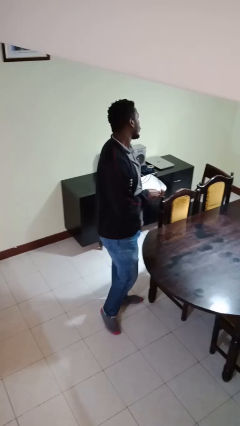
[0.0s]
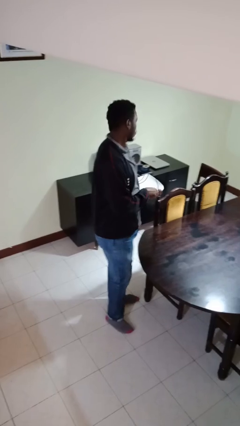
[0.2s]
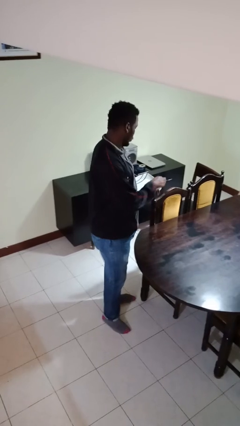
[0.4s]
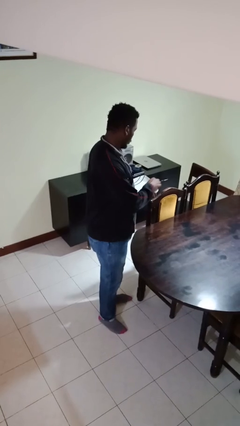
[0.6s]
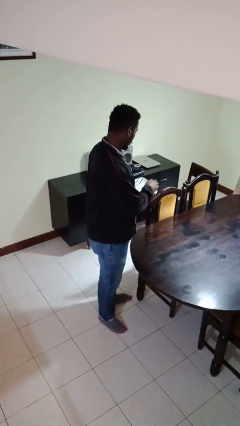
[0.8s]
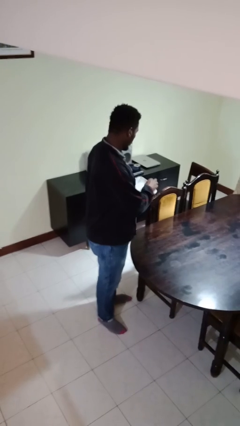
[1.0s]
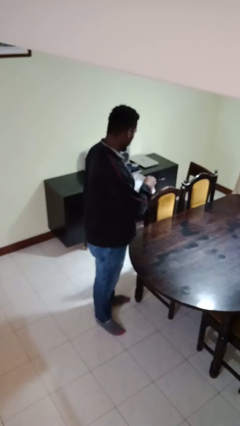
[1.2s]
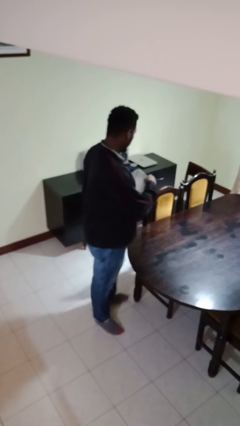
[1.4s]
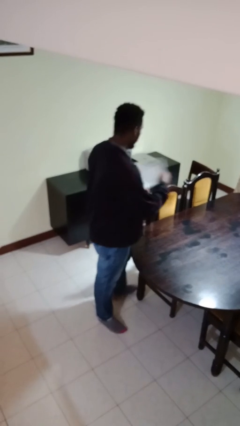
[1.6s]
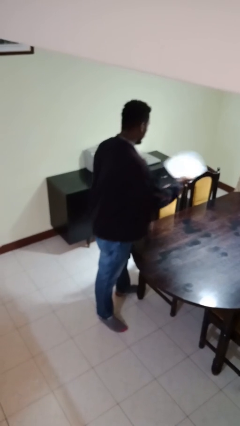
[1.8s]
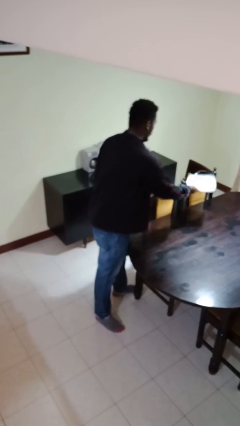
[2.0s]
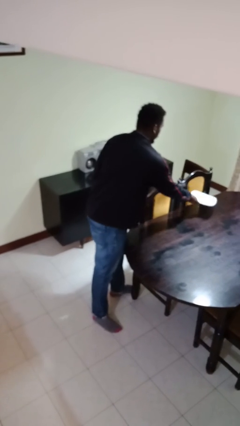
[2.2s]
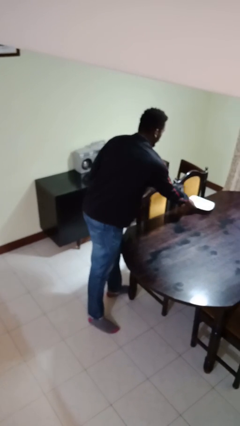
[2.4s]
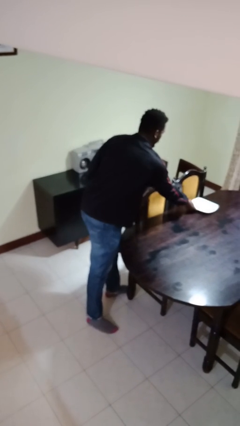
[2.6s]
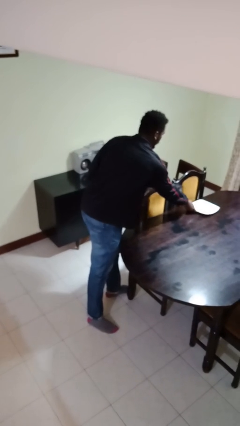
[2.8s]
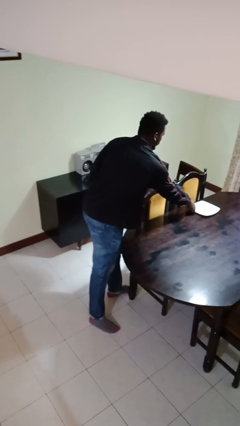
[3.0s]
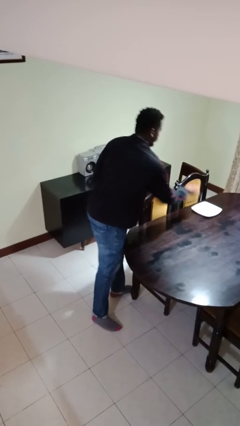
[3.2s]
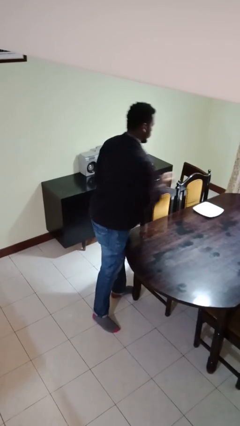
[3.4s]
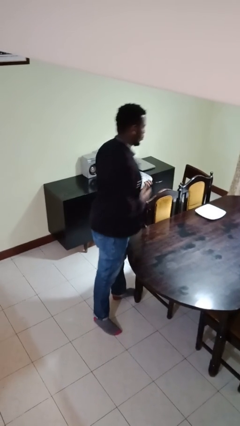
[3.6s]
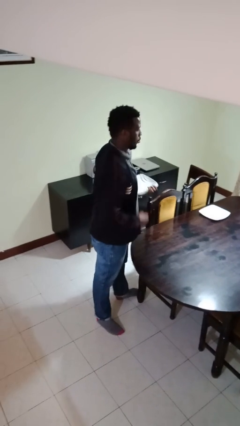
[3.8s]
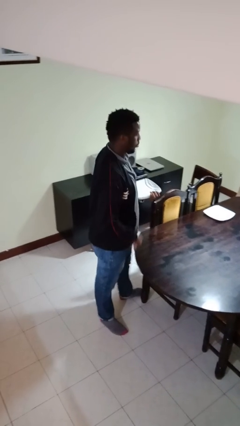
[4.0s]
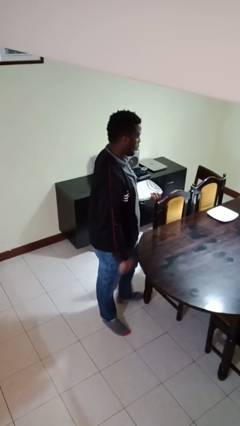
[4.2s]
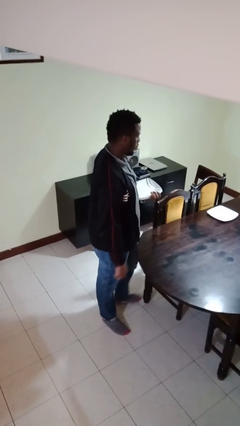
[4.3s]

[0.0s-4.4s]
person sets table

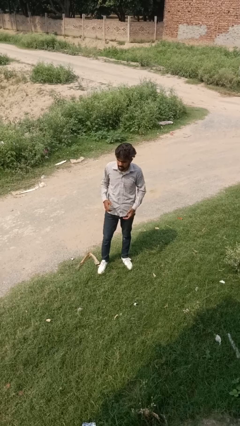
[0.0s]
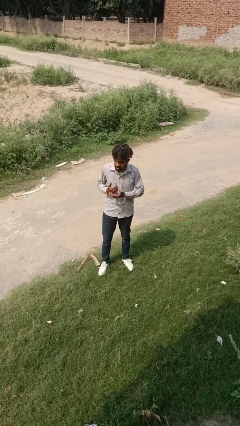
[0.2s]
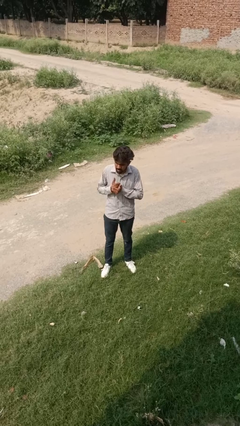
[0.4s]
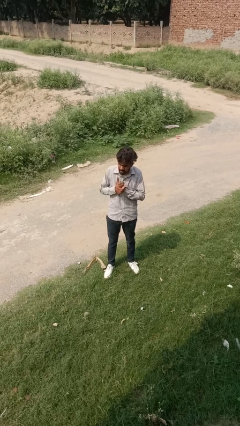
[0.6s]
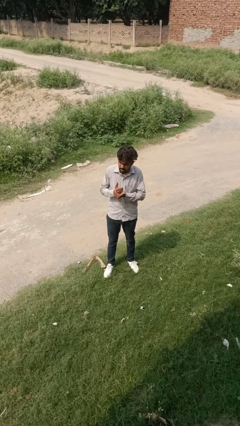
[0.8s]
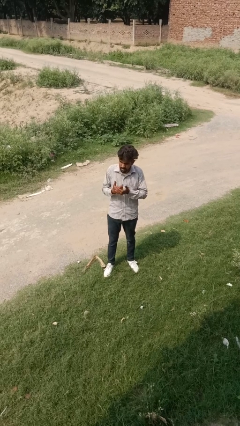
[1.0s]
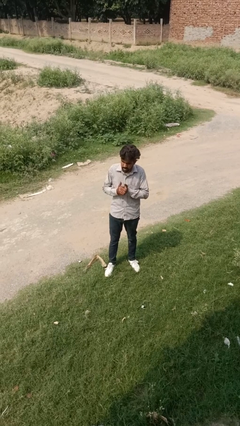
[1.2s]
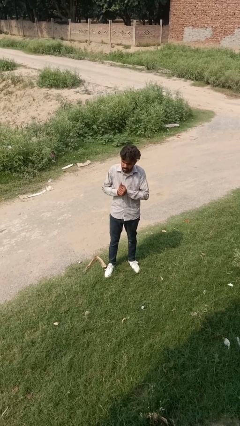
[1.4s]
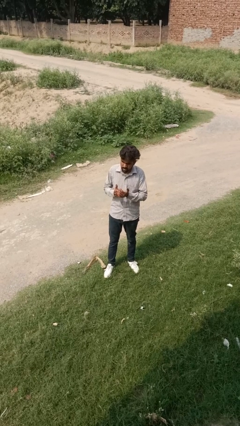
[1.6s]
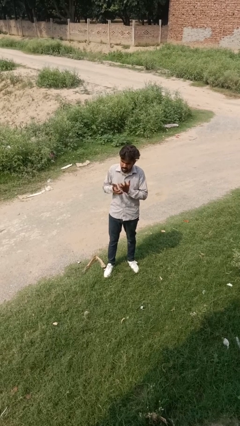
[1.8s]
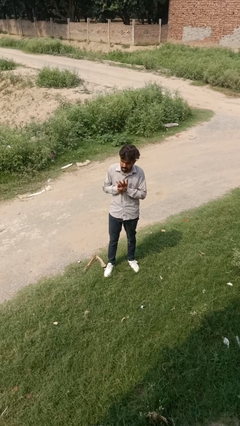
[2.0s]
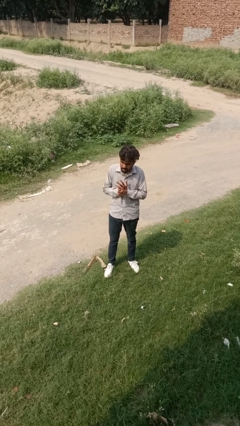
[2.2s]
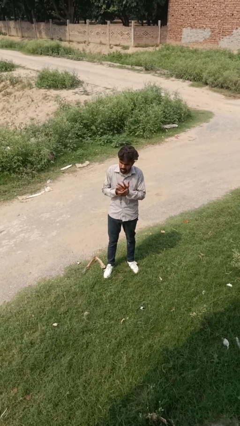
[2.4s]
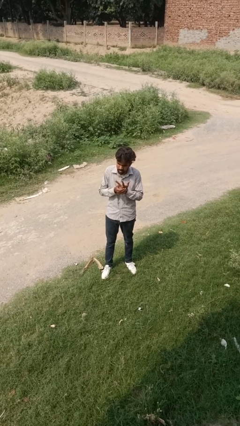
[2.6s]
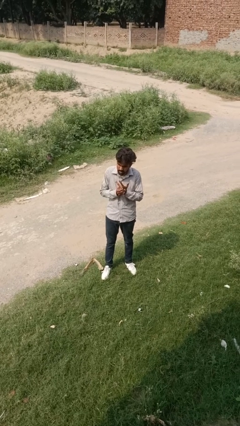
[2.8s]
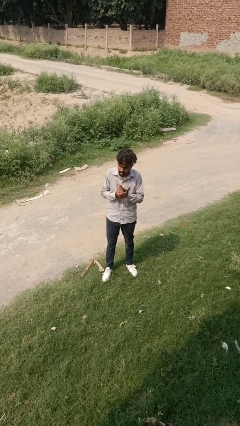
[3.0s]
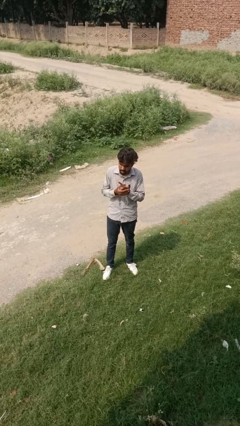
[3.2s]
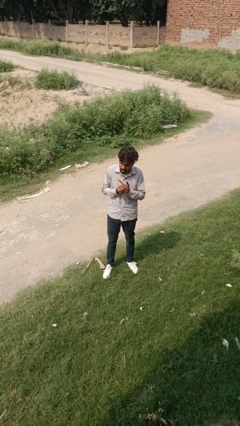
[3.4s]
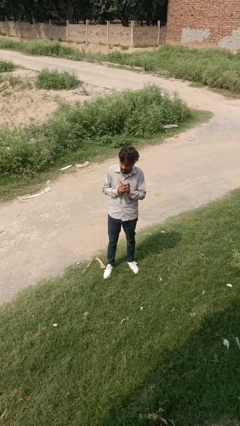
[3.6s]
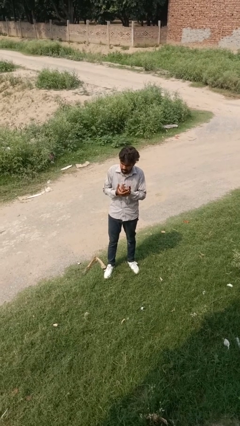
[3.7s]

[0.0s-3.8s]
person cracks knuckles

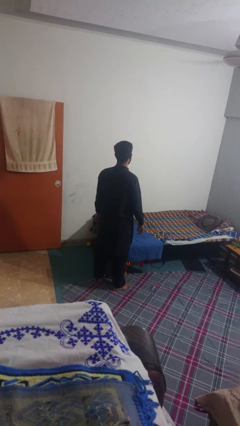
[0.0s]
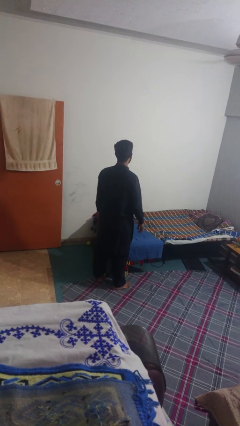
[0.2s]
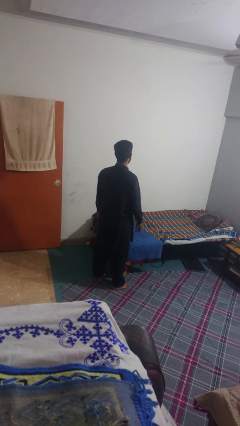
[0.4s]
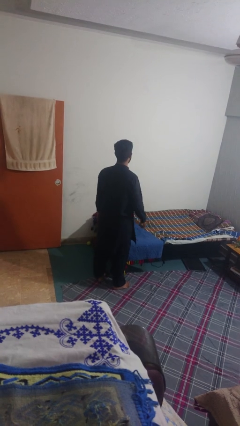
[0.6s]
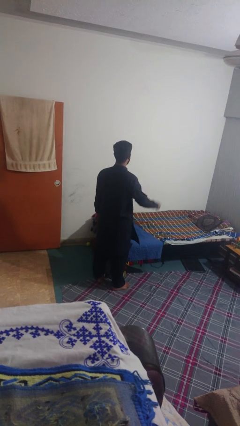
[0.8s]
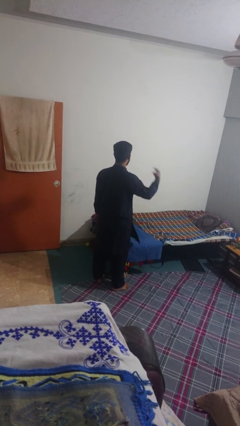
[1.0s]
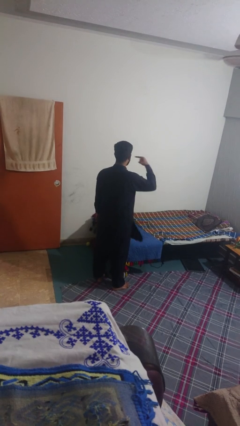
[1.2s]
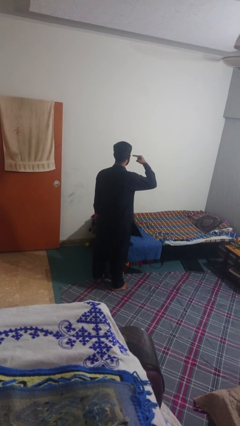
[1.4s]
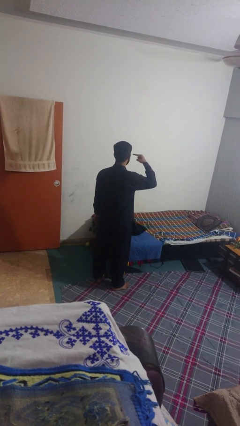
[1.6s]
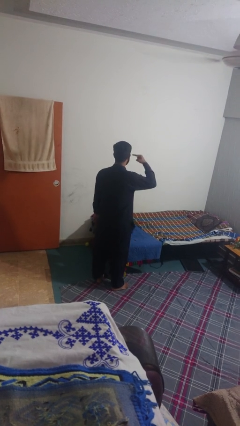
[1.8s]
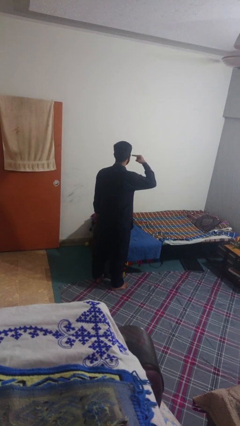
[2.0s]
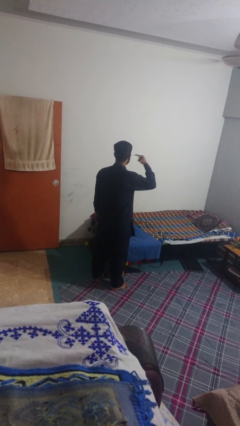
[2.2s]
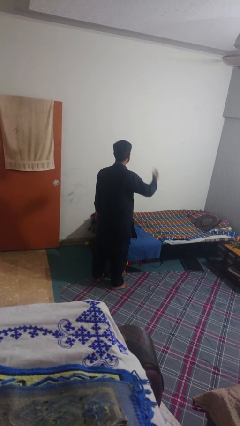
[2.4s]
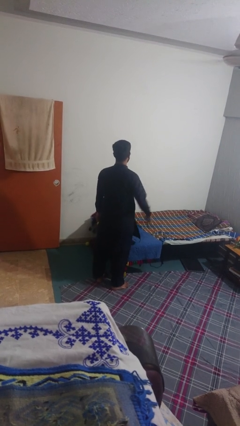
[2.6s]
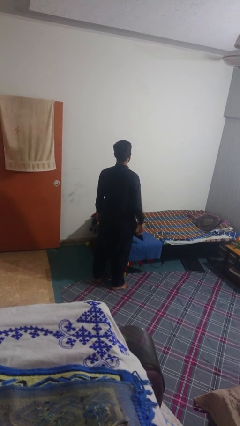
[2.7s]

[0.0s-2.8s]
person gestures listen closely

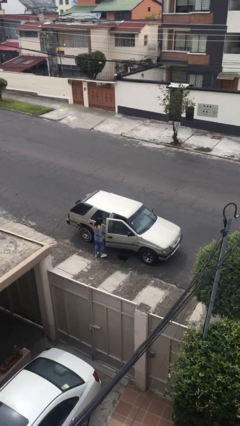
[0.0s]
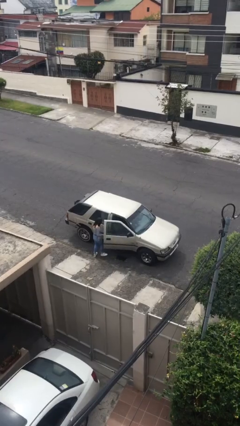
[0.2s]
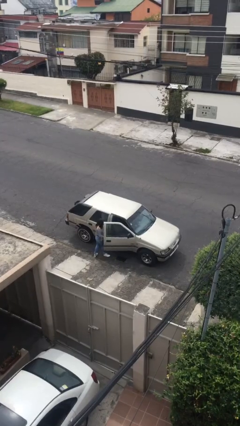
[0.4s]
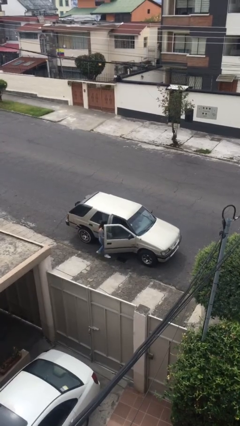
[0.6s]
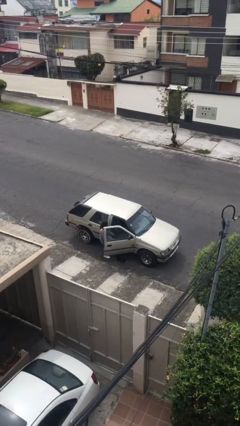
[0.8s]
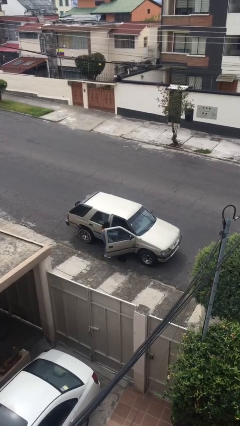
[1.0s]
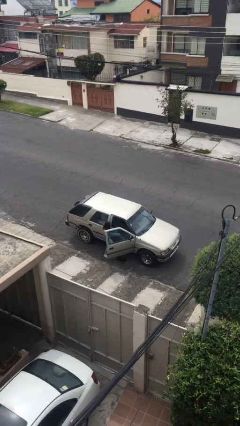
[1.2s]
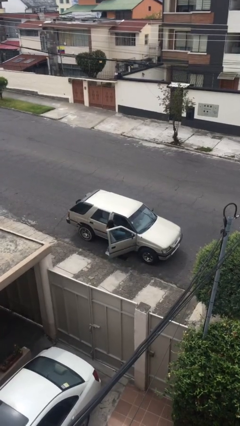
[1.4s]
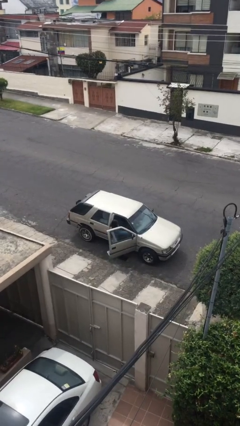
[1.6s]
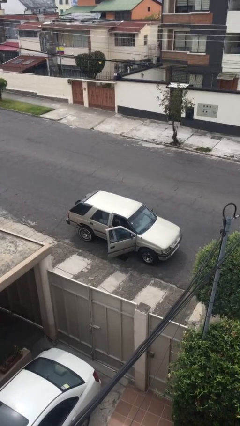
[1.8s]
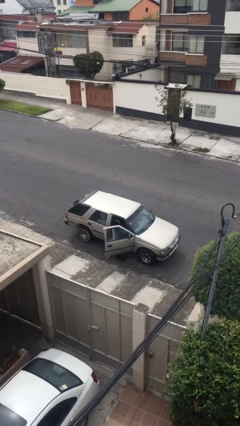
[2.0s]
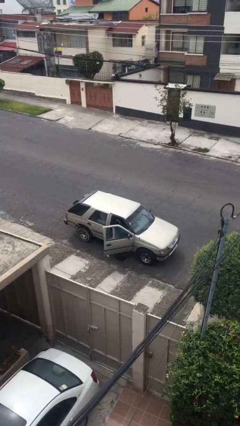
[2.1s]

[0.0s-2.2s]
car picks up person

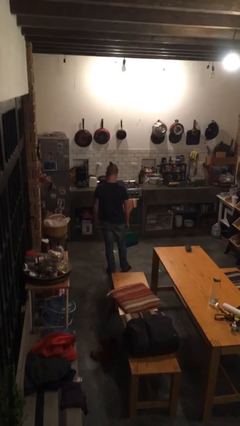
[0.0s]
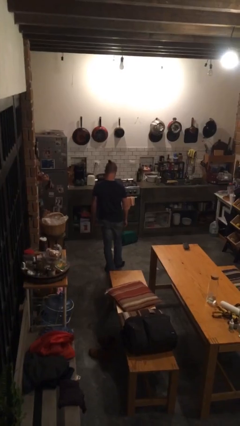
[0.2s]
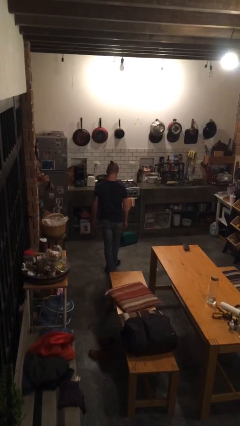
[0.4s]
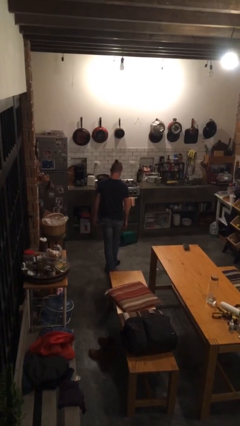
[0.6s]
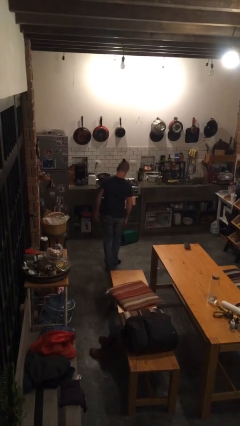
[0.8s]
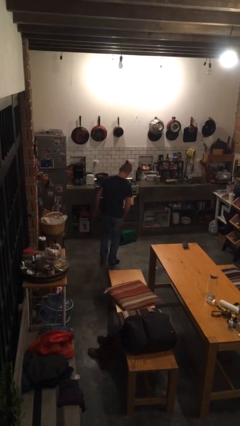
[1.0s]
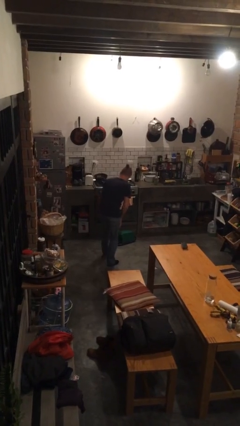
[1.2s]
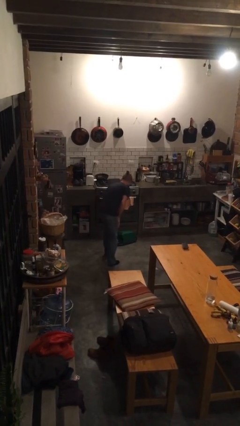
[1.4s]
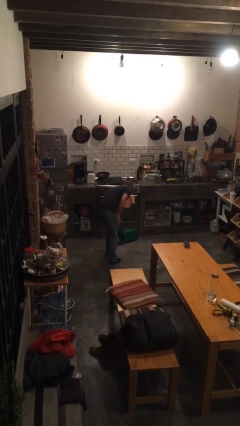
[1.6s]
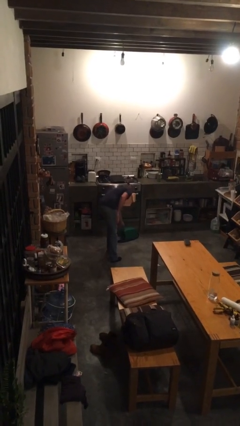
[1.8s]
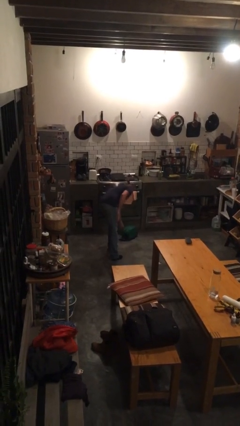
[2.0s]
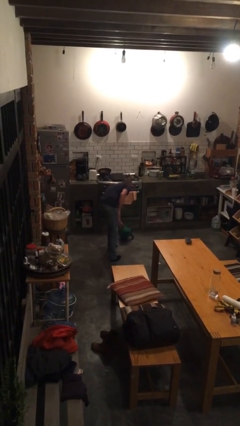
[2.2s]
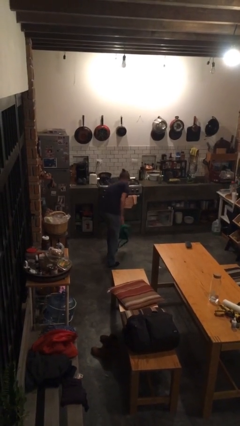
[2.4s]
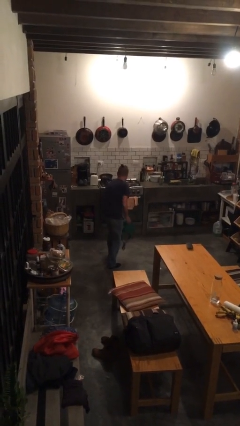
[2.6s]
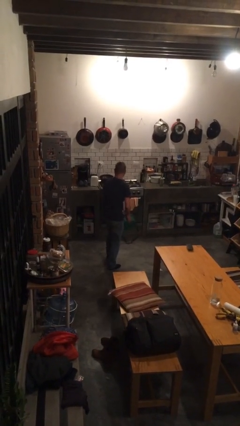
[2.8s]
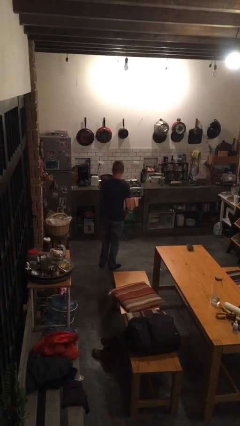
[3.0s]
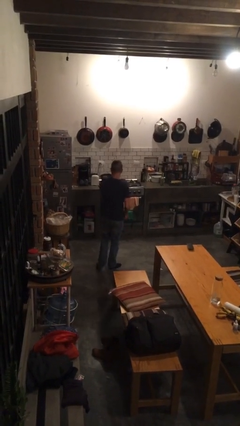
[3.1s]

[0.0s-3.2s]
person picks up object from floor

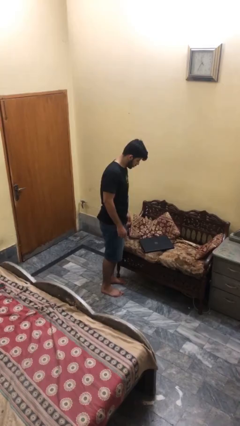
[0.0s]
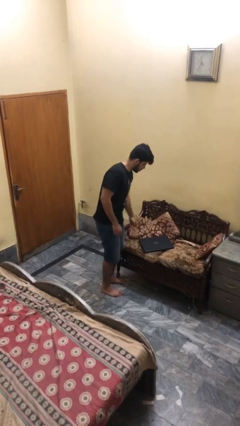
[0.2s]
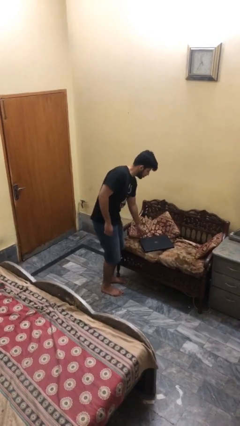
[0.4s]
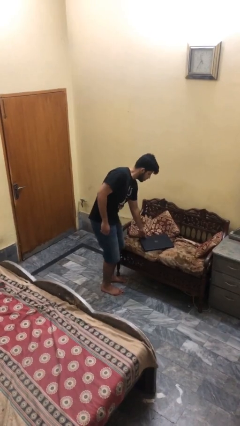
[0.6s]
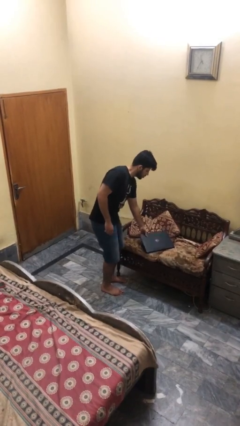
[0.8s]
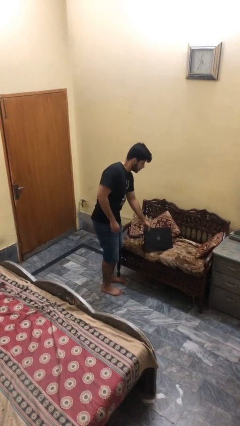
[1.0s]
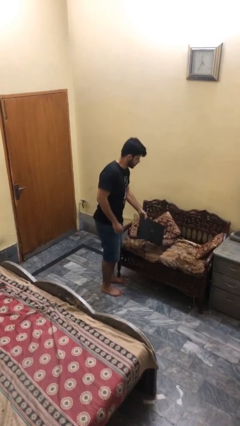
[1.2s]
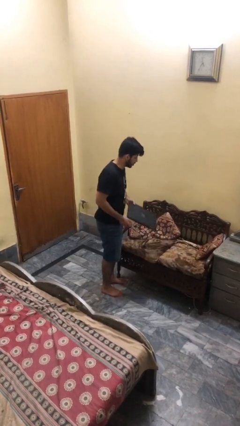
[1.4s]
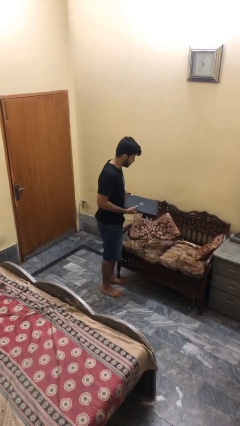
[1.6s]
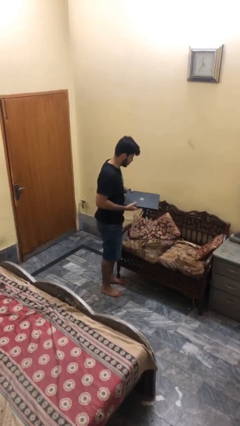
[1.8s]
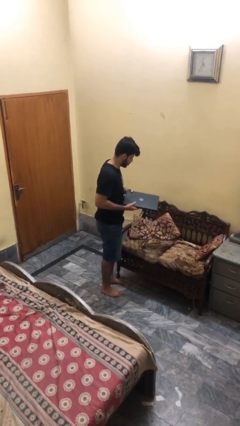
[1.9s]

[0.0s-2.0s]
person picks up object from couch
